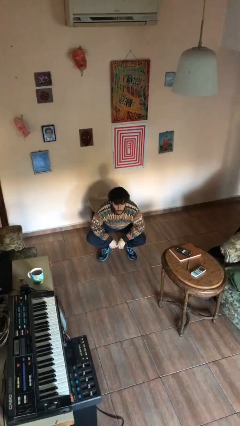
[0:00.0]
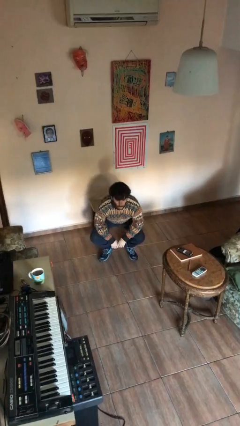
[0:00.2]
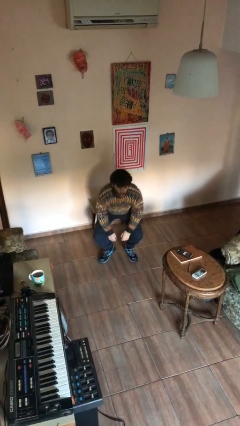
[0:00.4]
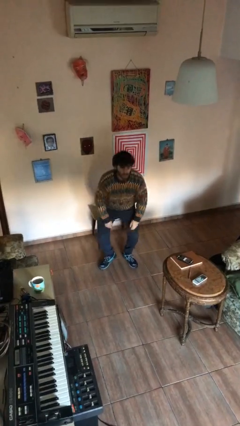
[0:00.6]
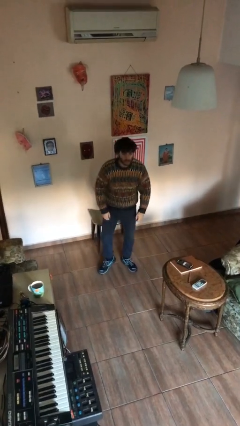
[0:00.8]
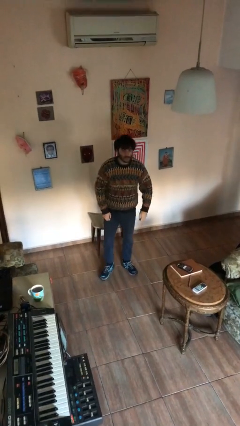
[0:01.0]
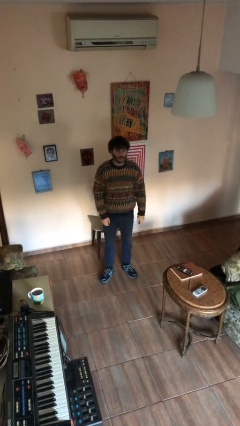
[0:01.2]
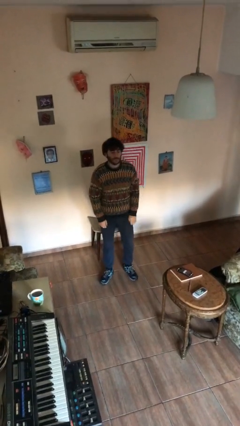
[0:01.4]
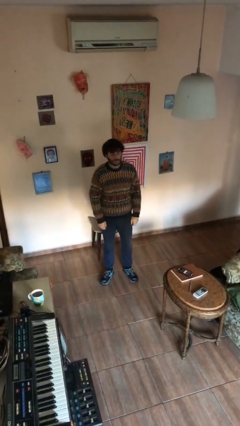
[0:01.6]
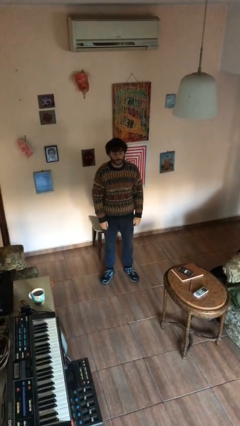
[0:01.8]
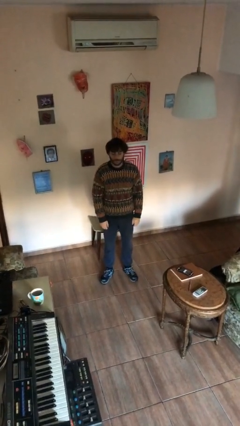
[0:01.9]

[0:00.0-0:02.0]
person stands up

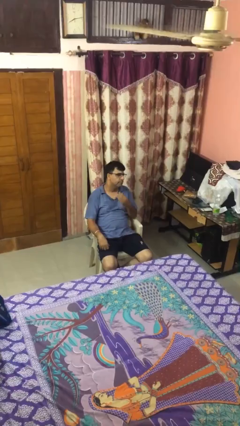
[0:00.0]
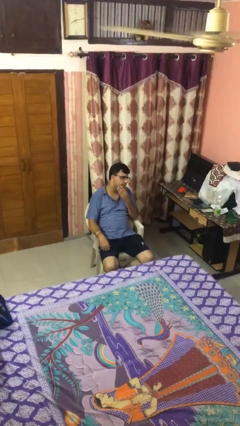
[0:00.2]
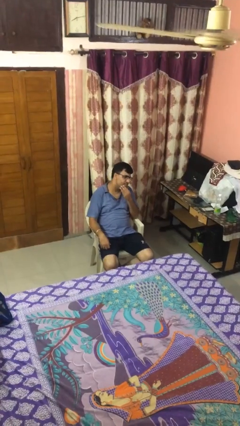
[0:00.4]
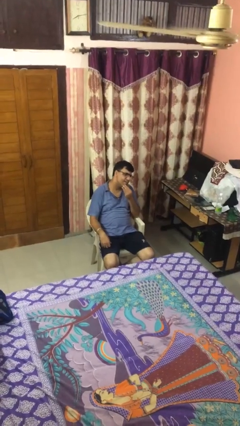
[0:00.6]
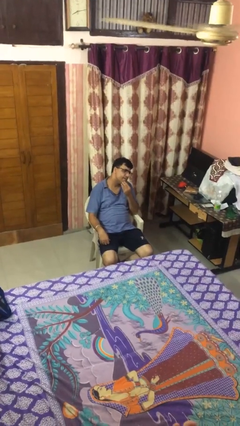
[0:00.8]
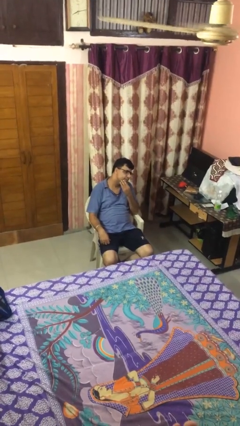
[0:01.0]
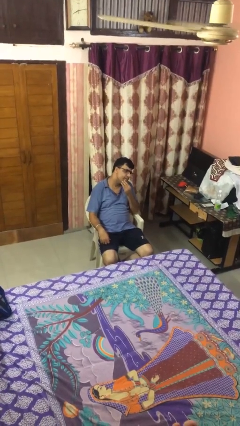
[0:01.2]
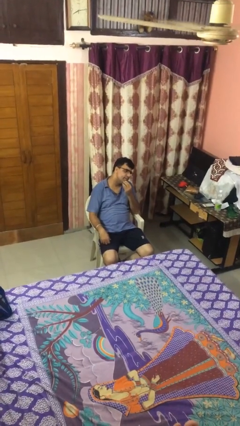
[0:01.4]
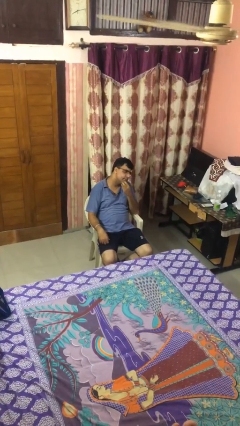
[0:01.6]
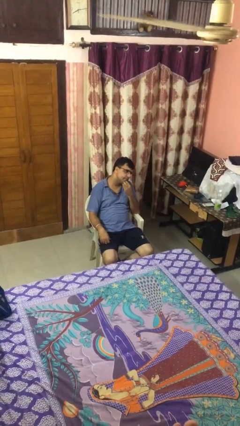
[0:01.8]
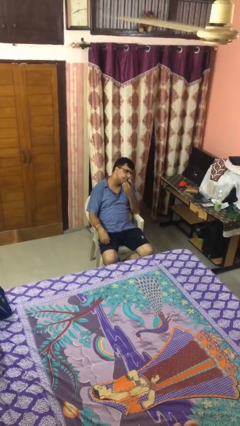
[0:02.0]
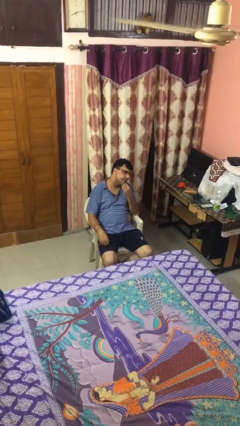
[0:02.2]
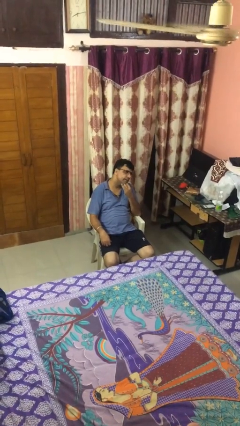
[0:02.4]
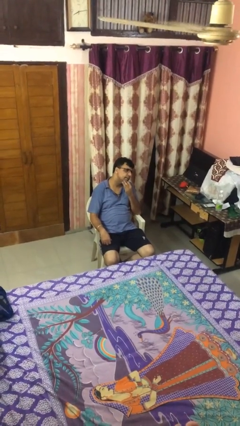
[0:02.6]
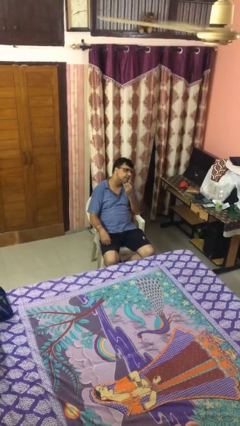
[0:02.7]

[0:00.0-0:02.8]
person strokes chin

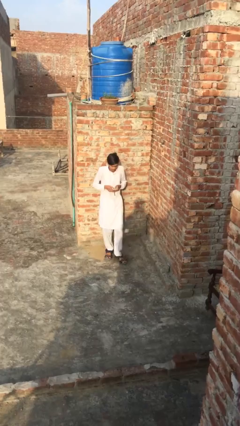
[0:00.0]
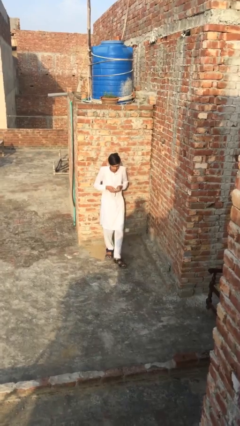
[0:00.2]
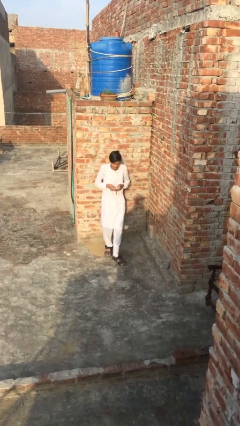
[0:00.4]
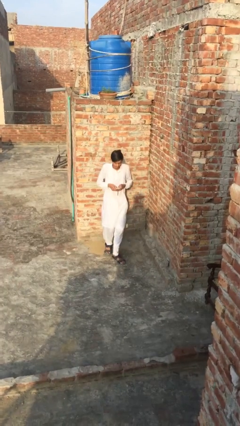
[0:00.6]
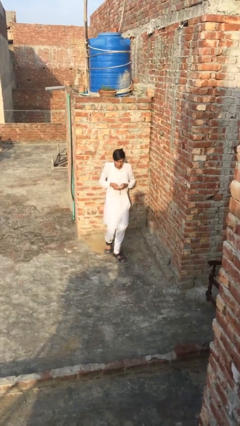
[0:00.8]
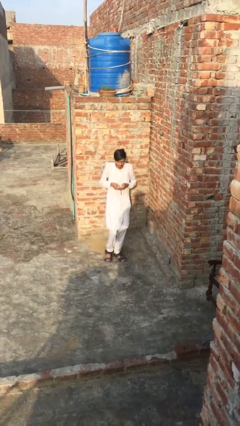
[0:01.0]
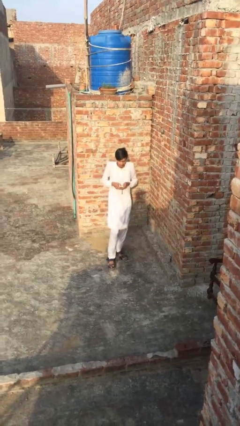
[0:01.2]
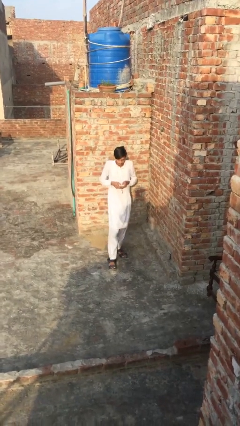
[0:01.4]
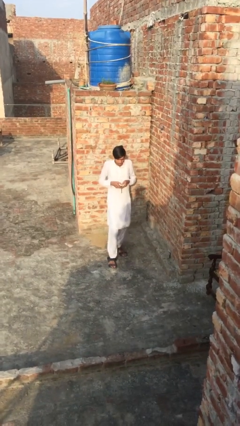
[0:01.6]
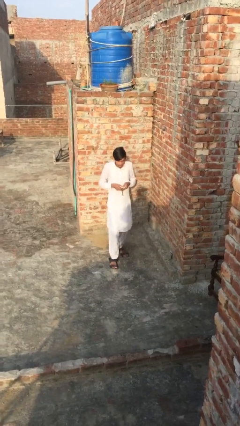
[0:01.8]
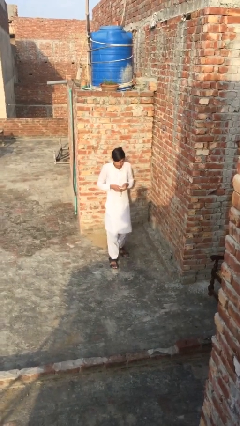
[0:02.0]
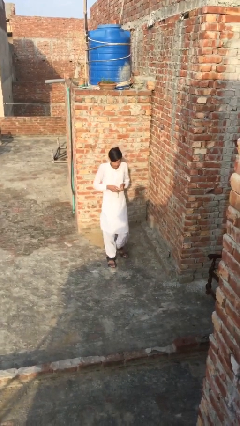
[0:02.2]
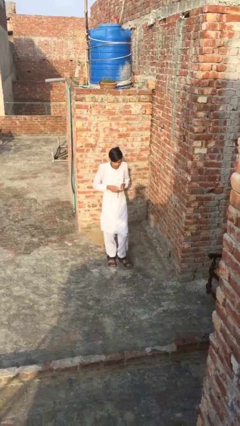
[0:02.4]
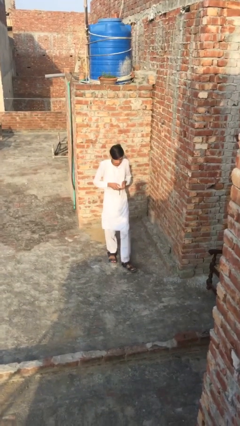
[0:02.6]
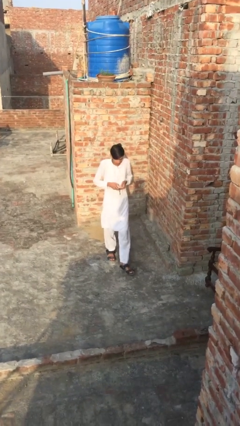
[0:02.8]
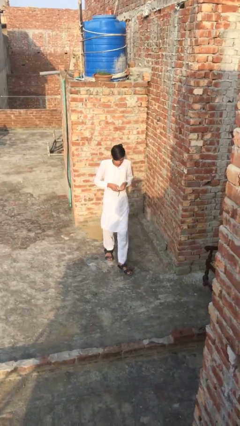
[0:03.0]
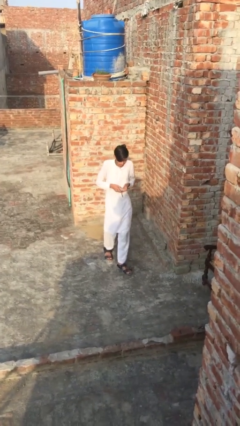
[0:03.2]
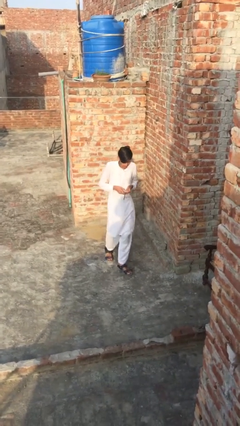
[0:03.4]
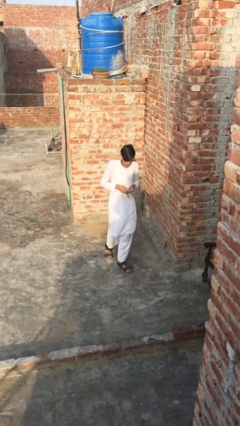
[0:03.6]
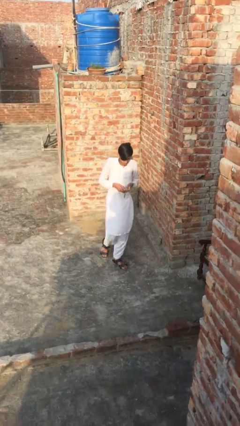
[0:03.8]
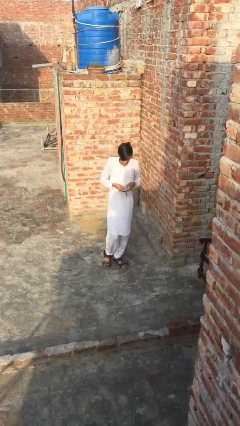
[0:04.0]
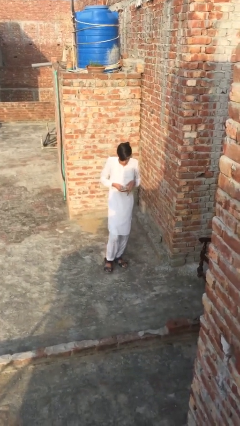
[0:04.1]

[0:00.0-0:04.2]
person texts on phone

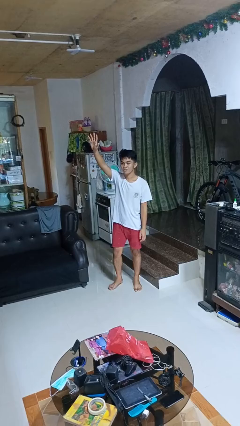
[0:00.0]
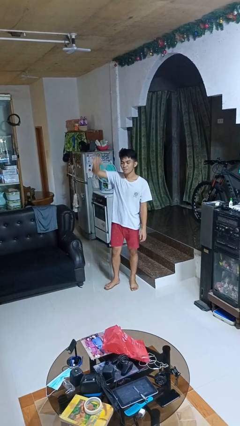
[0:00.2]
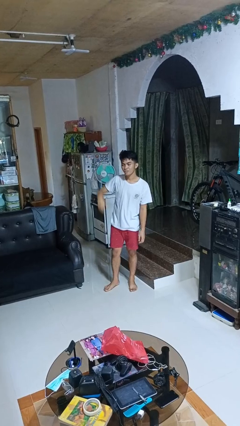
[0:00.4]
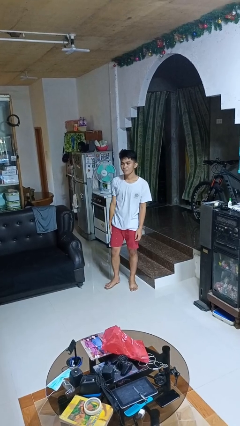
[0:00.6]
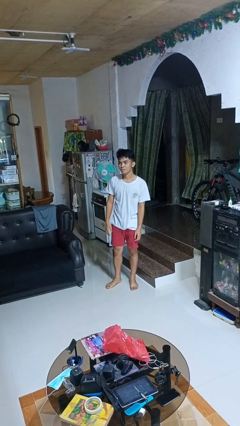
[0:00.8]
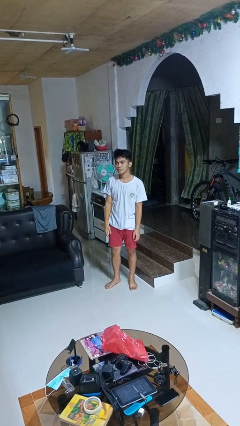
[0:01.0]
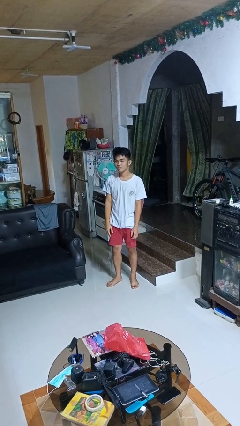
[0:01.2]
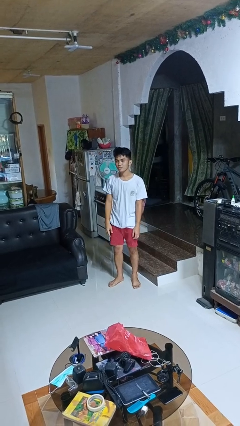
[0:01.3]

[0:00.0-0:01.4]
person gestures lower hand

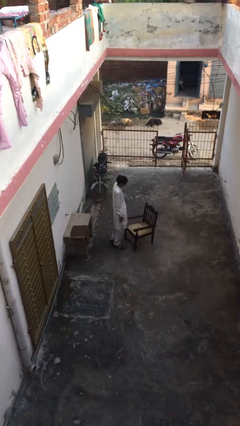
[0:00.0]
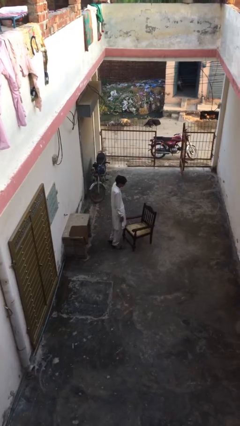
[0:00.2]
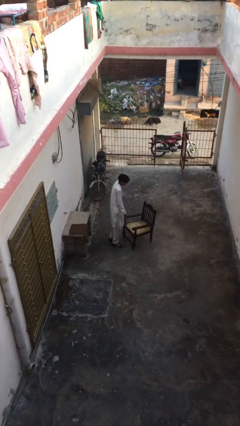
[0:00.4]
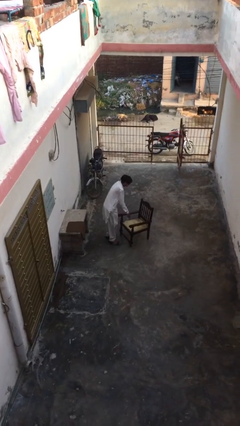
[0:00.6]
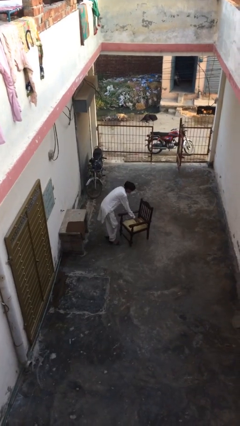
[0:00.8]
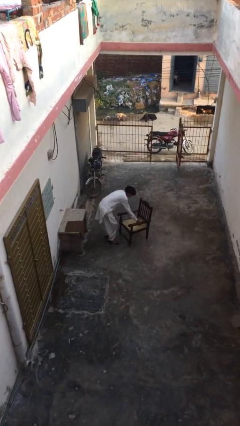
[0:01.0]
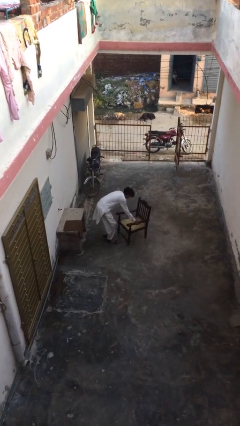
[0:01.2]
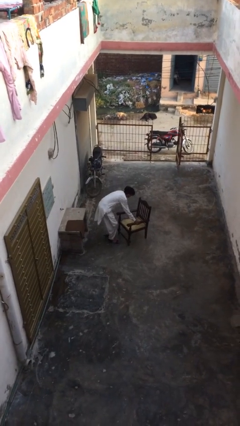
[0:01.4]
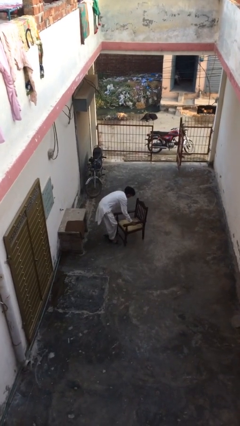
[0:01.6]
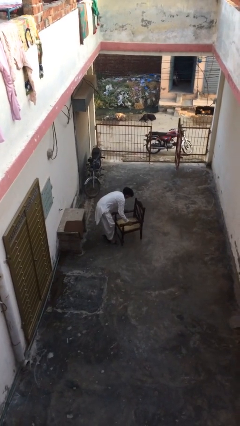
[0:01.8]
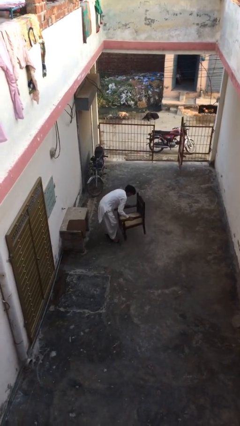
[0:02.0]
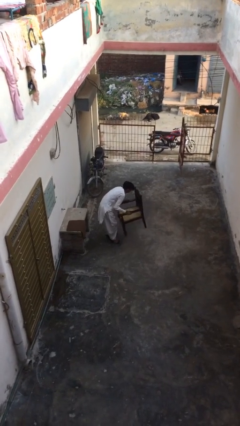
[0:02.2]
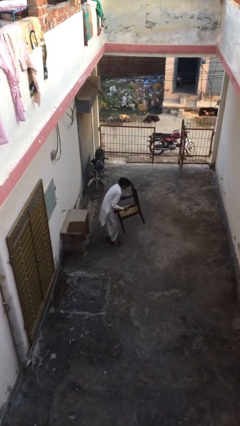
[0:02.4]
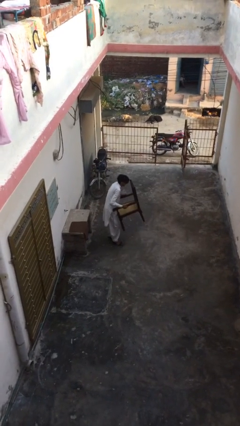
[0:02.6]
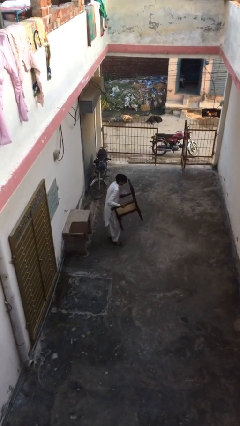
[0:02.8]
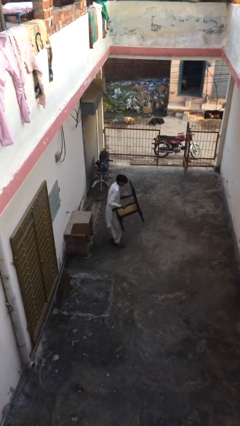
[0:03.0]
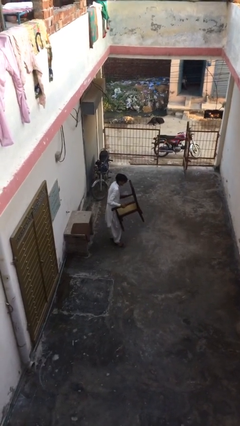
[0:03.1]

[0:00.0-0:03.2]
person picks up object from floor

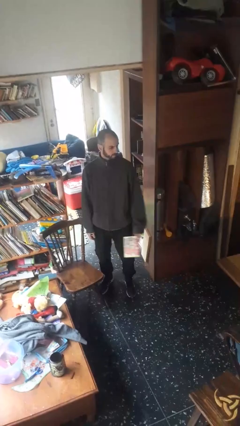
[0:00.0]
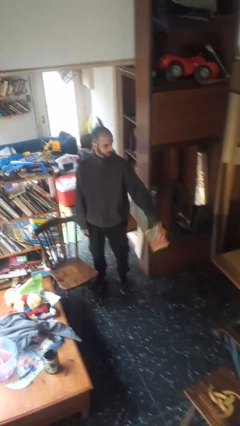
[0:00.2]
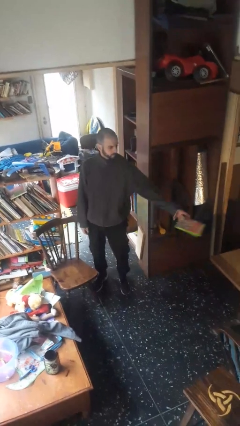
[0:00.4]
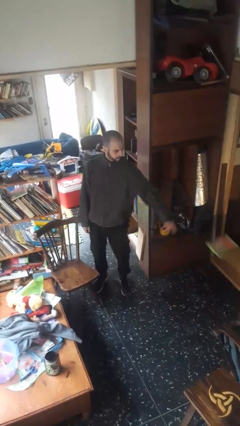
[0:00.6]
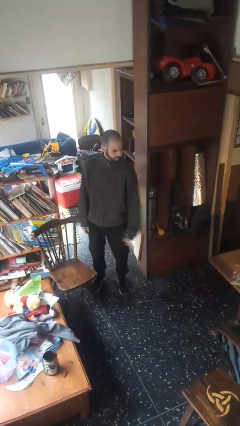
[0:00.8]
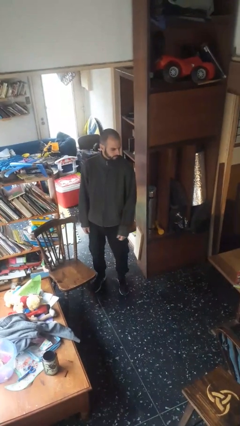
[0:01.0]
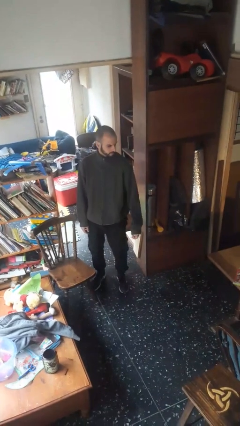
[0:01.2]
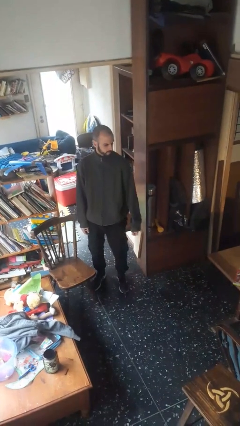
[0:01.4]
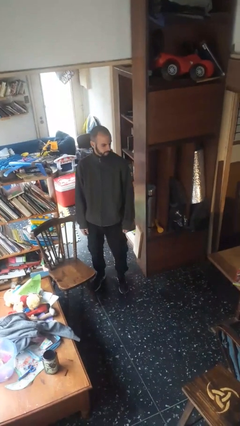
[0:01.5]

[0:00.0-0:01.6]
person throws object on table

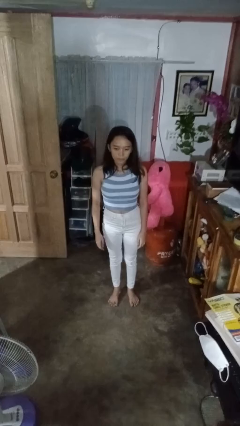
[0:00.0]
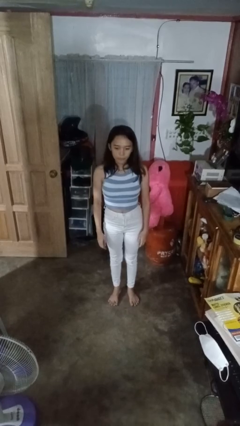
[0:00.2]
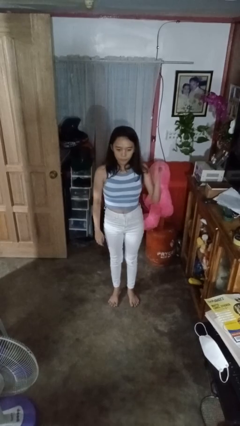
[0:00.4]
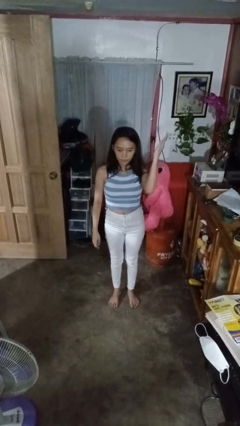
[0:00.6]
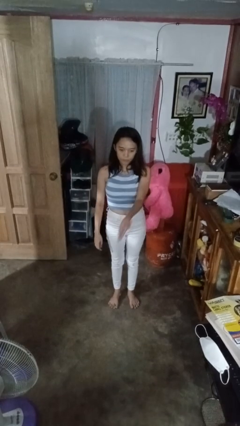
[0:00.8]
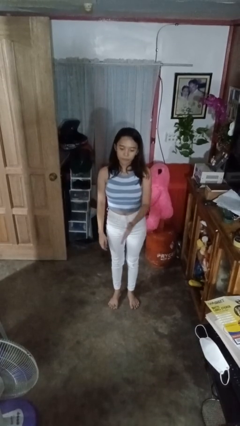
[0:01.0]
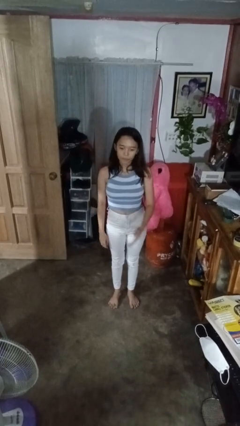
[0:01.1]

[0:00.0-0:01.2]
person karate chop

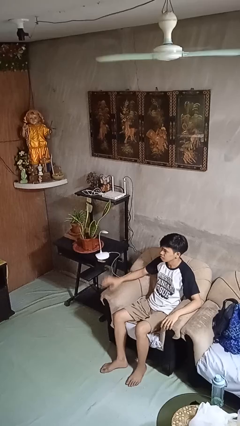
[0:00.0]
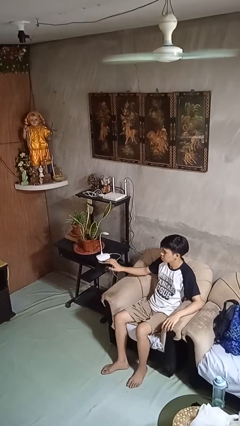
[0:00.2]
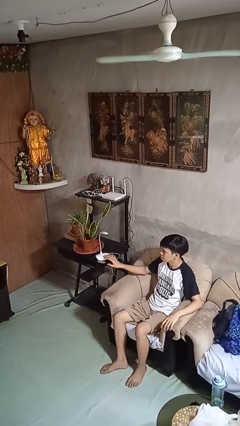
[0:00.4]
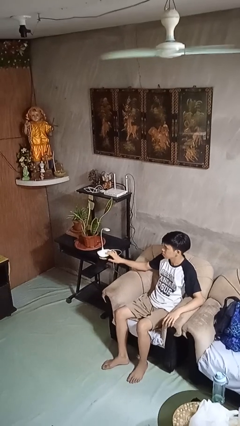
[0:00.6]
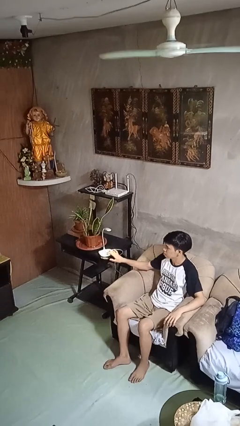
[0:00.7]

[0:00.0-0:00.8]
person turns on lamp
